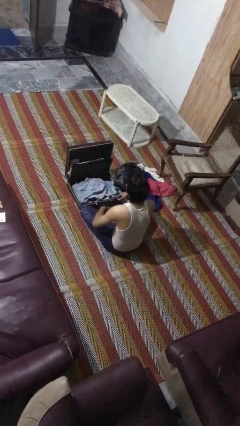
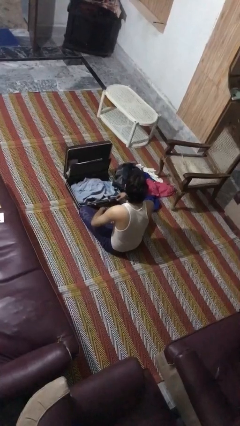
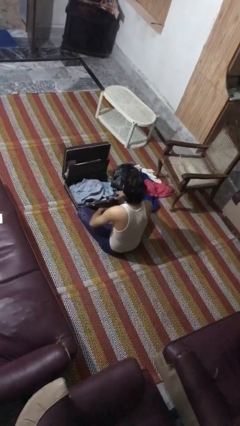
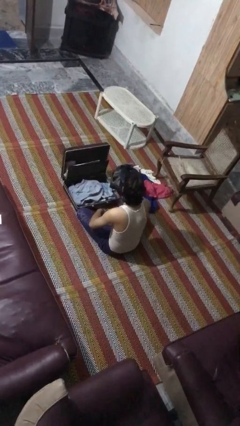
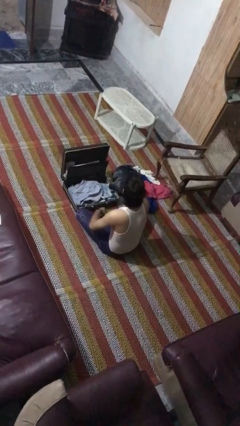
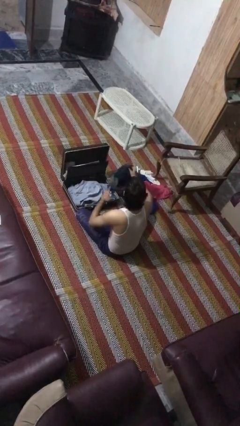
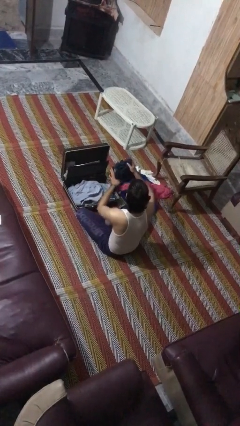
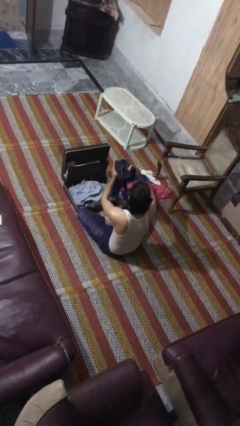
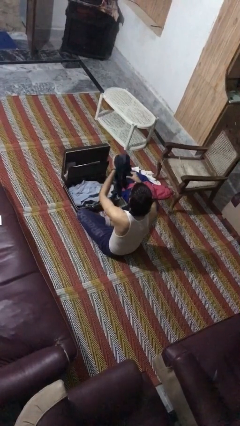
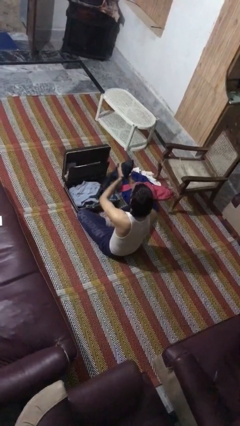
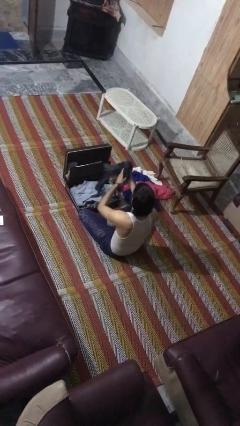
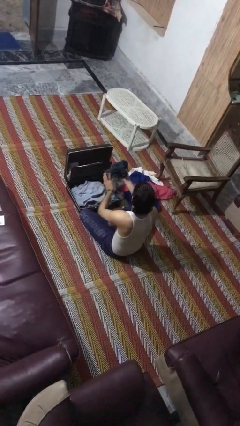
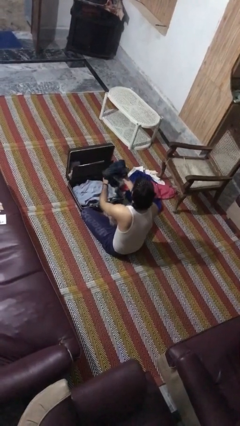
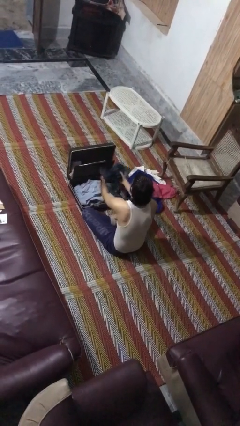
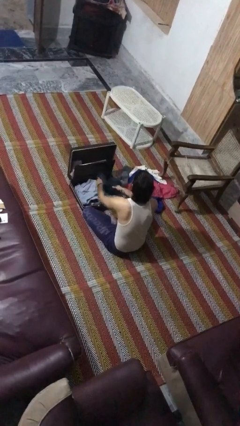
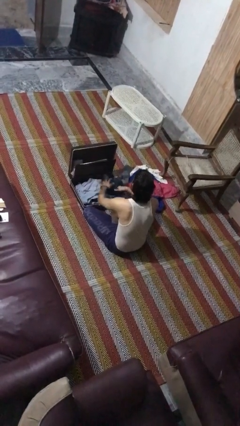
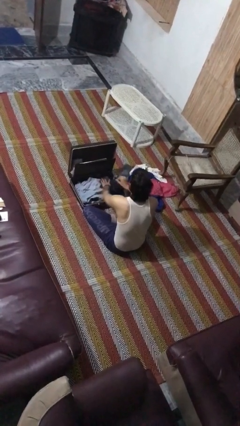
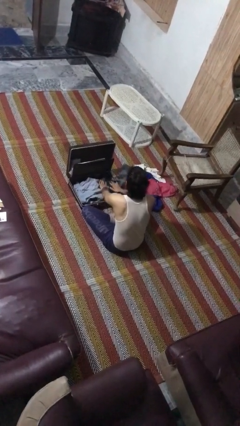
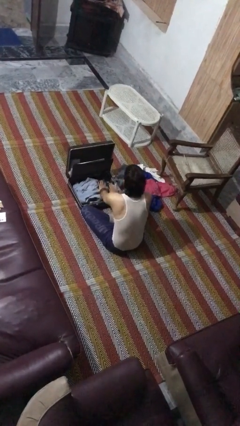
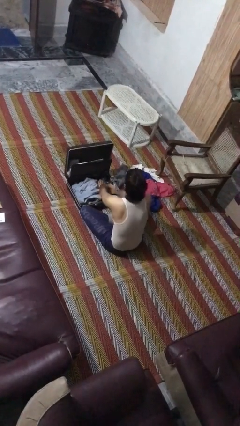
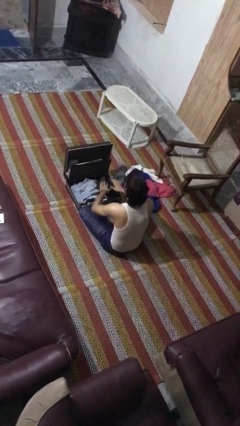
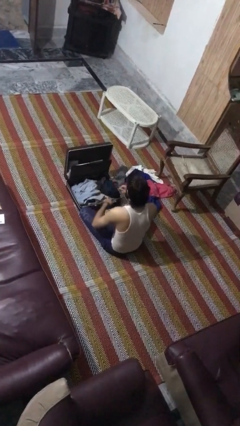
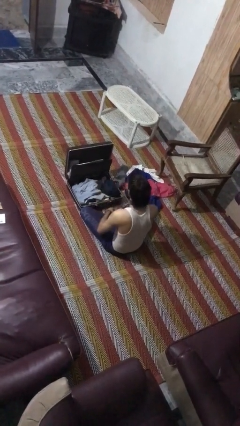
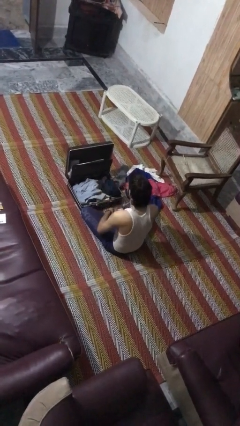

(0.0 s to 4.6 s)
person loads clothes into suitcase

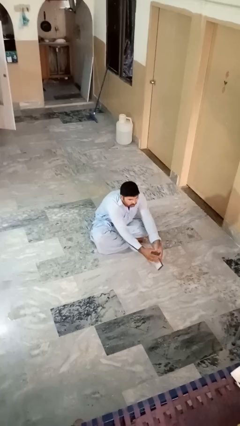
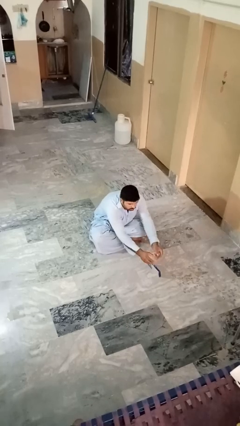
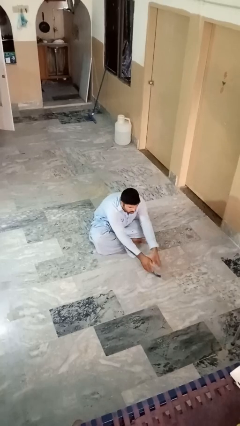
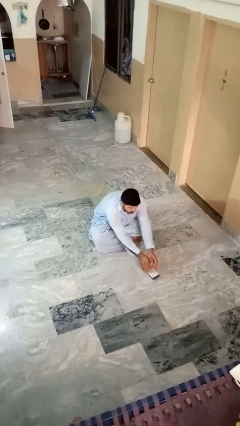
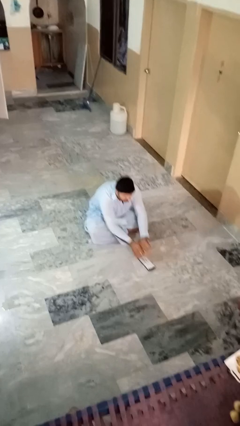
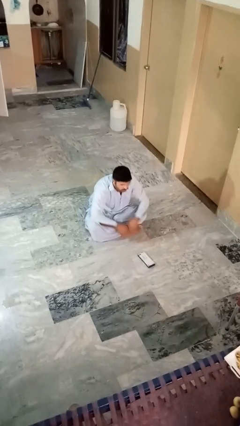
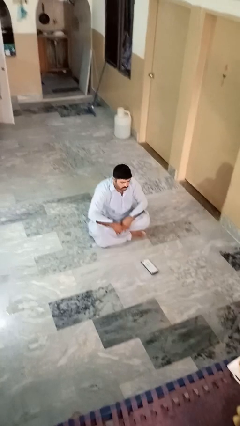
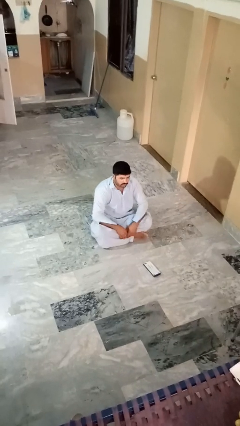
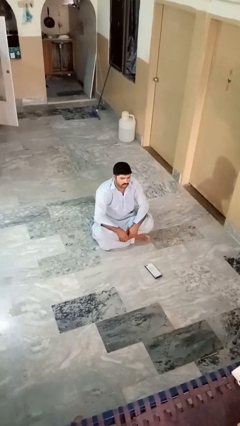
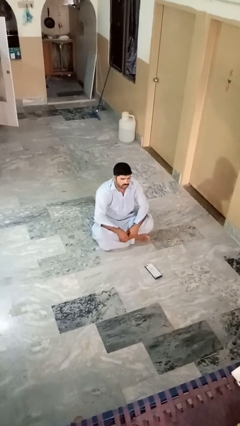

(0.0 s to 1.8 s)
person catches dropped object

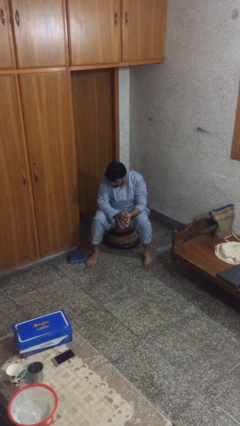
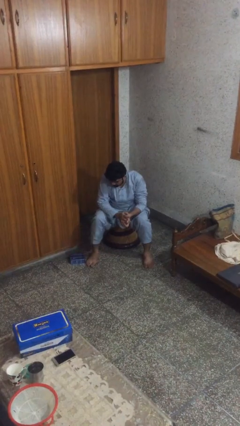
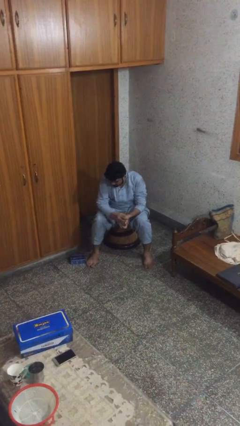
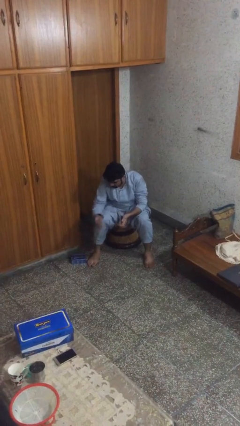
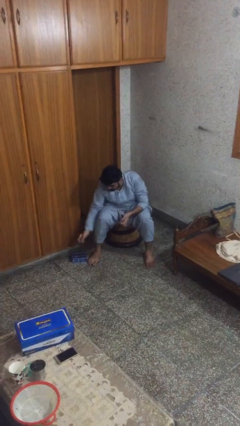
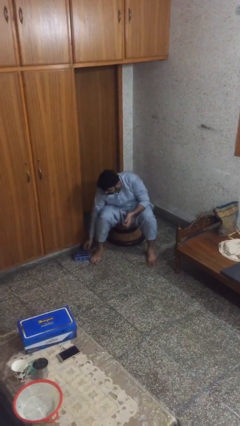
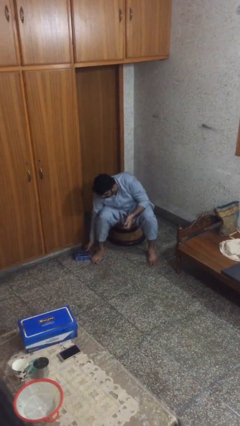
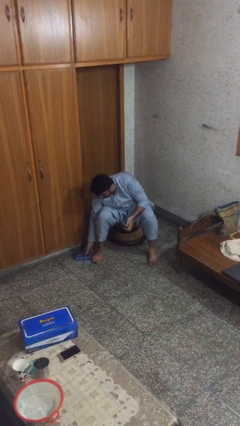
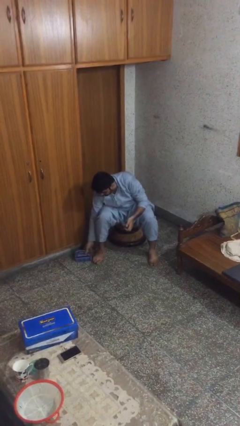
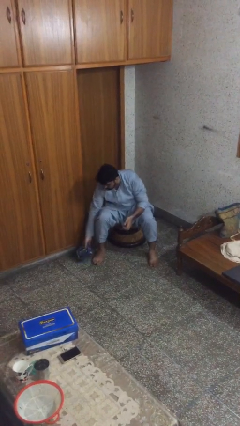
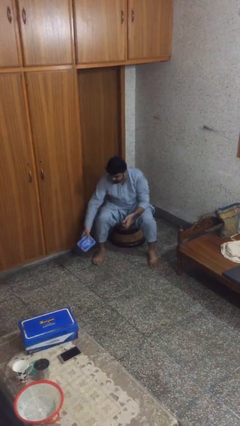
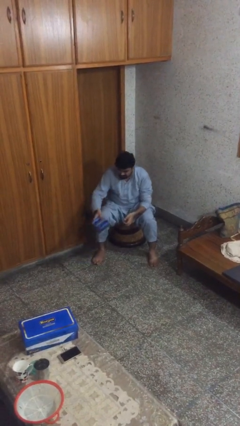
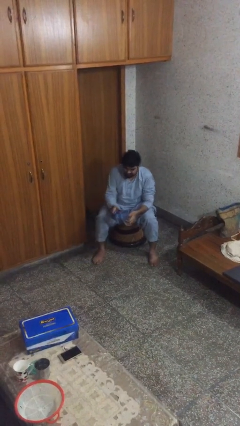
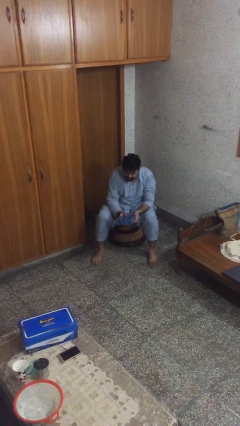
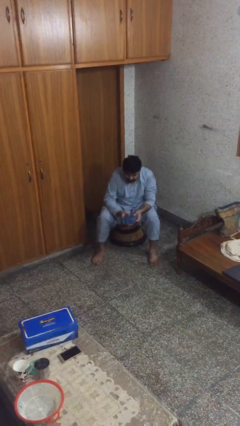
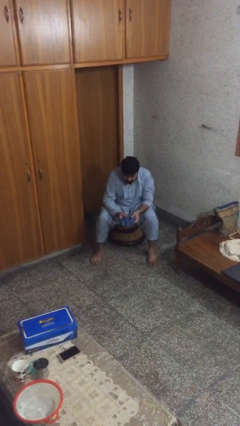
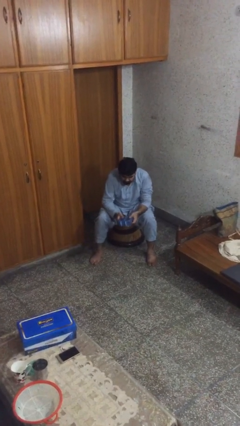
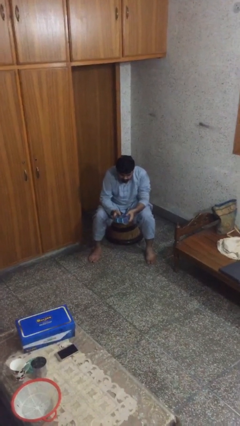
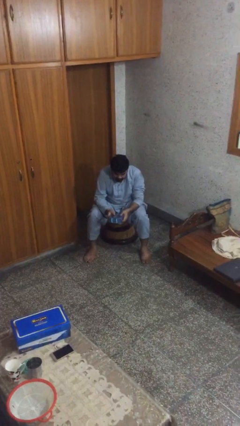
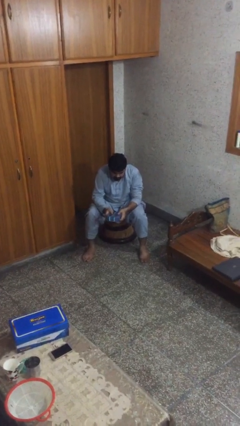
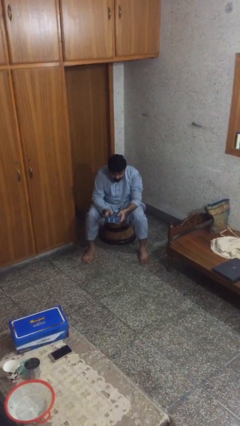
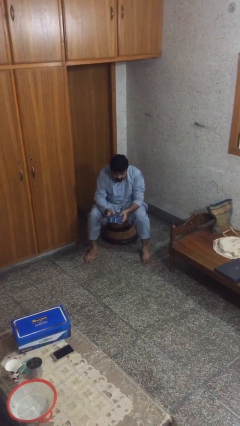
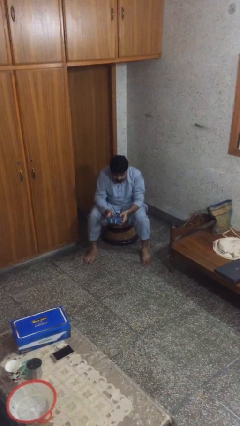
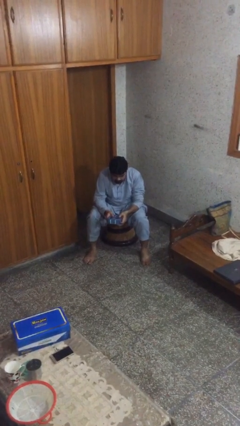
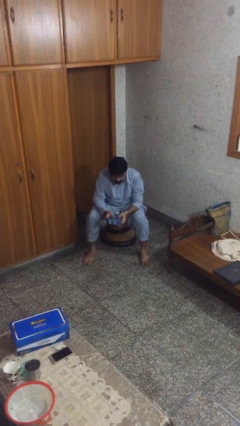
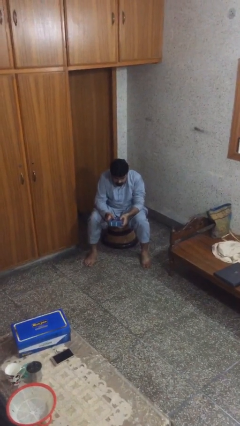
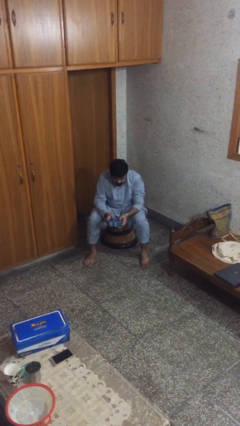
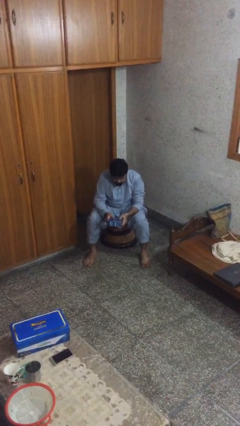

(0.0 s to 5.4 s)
person picks up object from floor

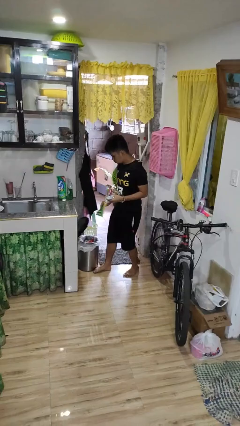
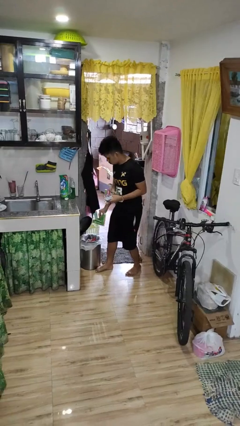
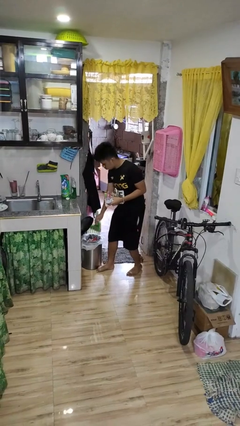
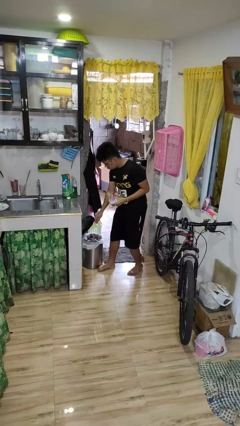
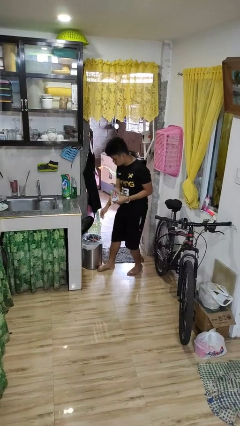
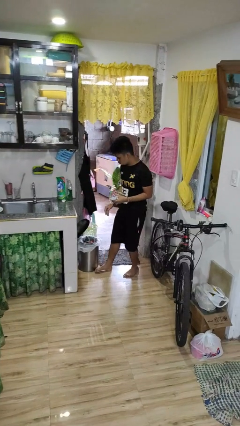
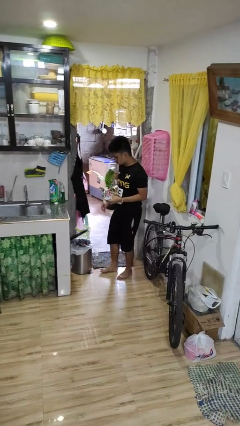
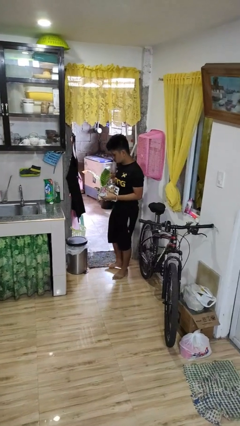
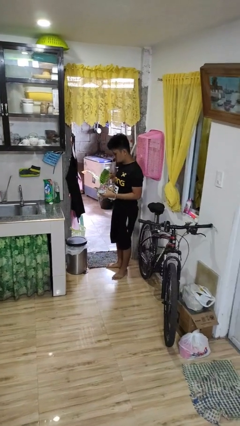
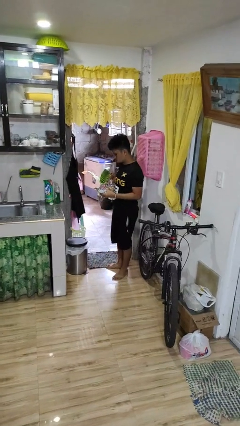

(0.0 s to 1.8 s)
person discards trash

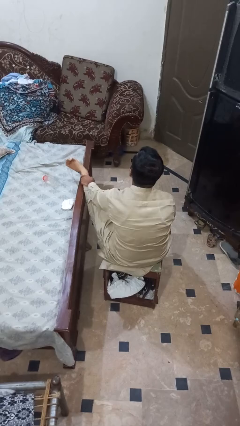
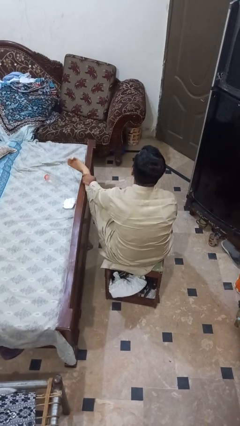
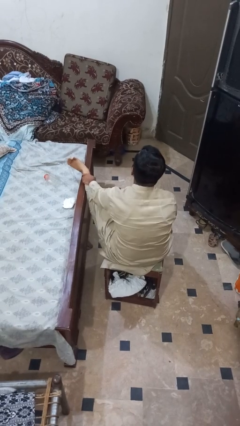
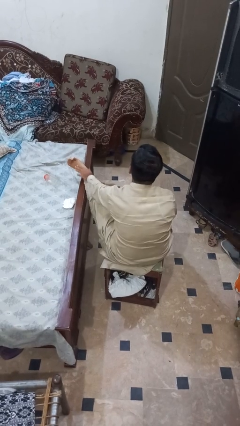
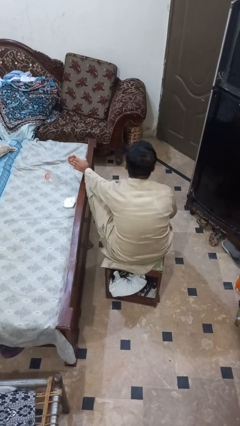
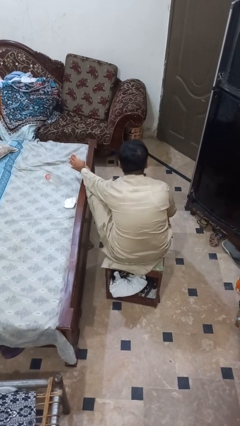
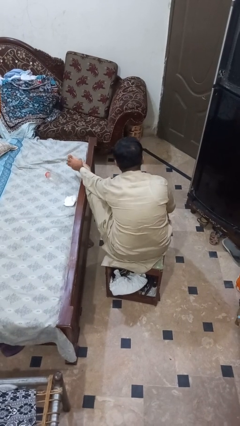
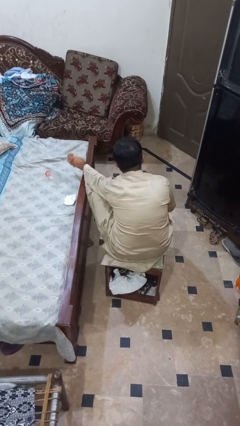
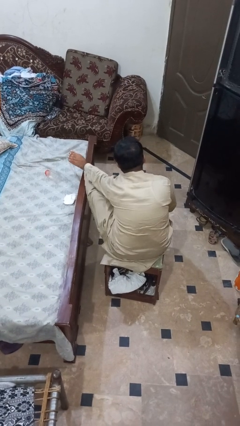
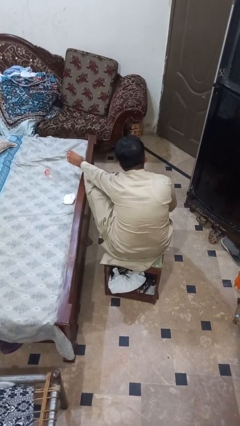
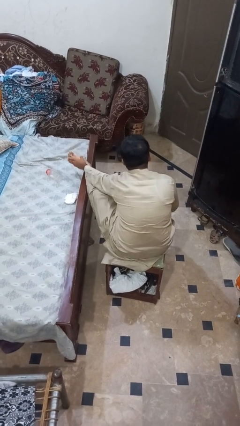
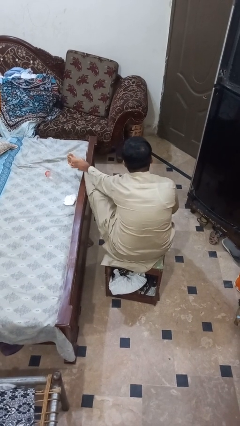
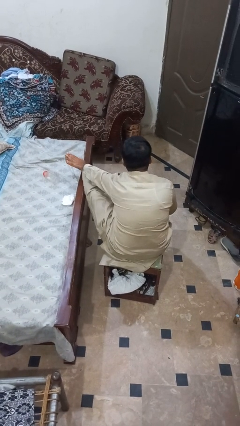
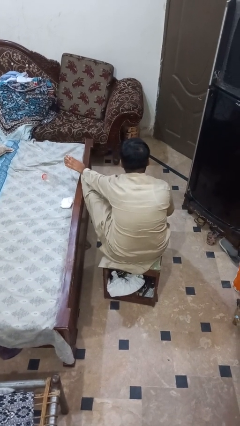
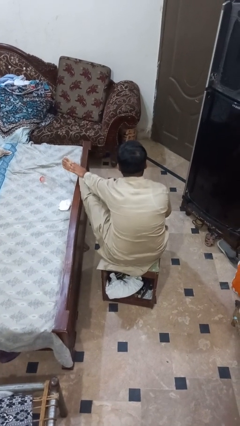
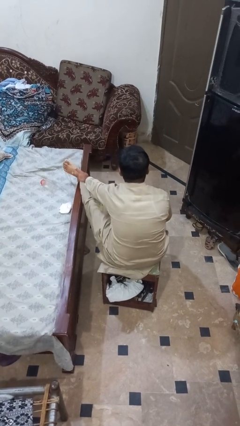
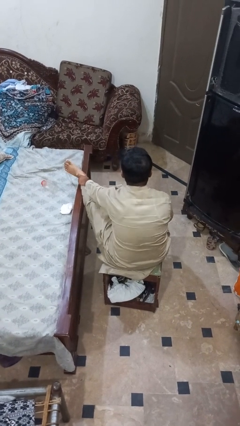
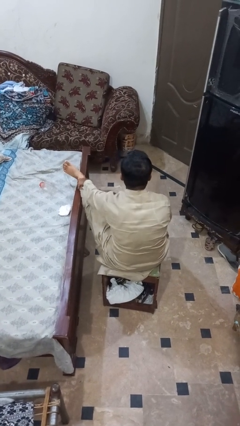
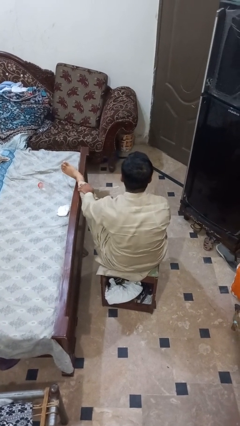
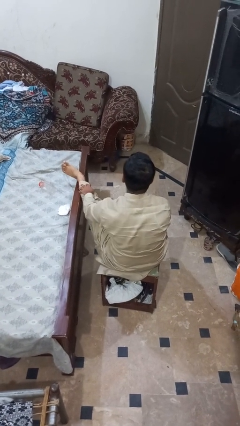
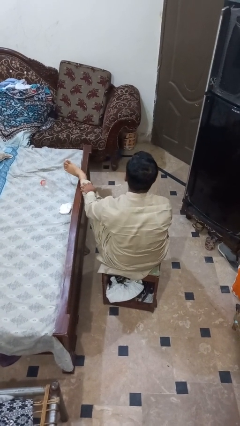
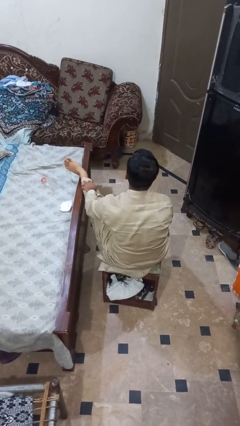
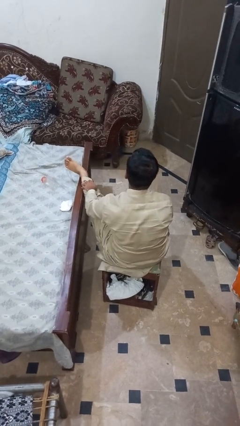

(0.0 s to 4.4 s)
person rubs foot
